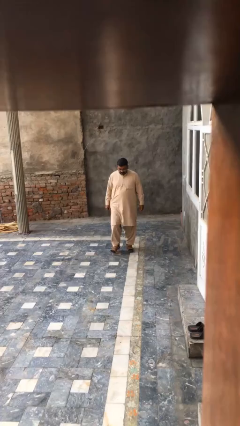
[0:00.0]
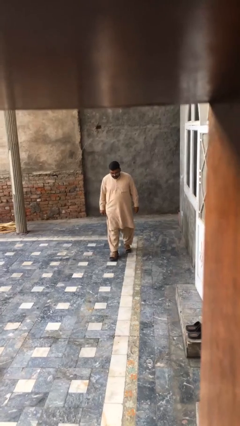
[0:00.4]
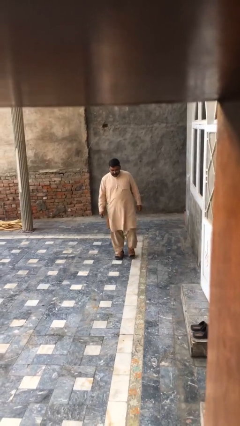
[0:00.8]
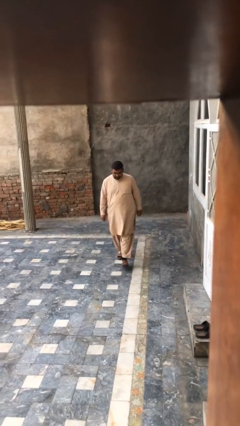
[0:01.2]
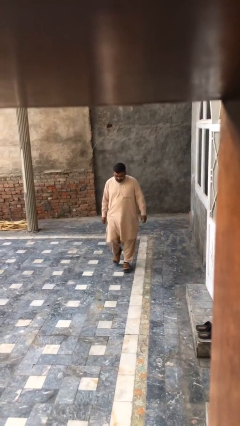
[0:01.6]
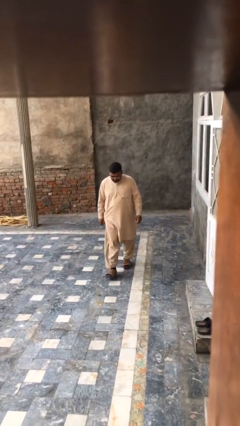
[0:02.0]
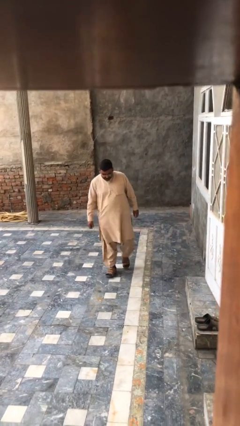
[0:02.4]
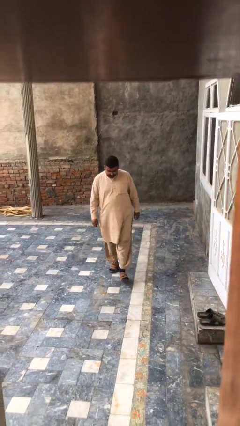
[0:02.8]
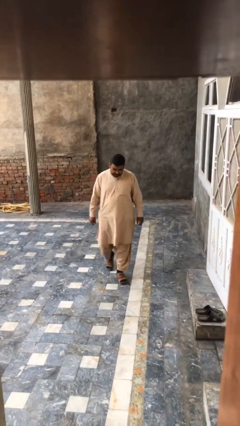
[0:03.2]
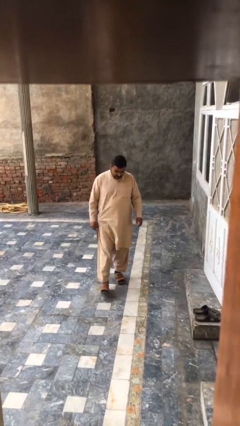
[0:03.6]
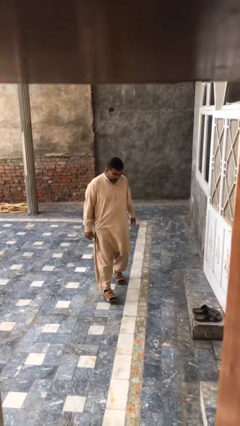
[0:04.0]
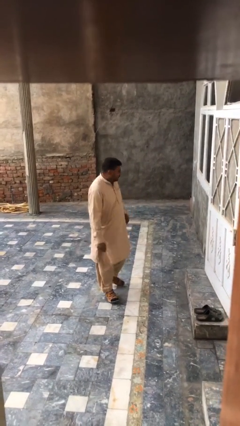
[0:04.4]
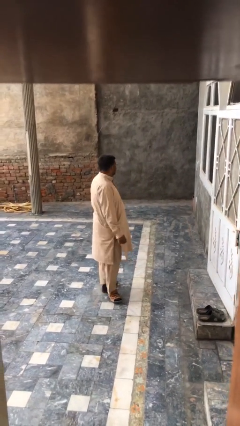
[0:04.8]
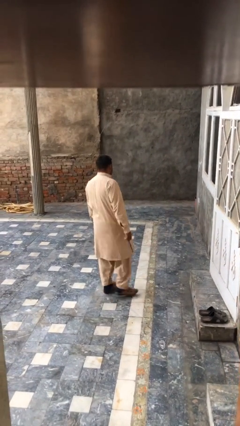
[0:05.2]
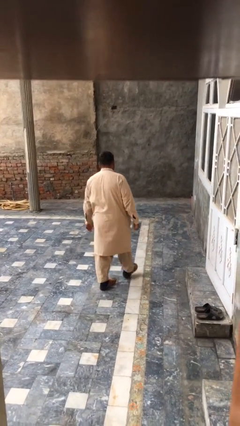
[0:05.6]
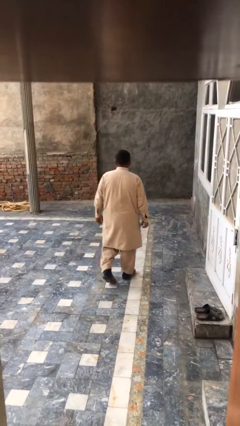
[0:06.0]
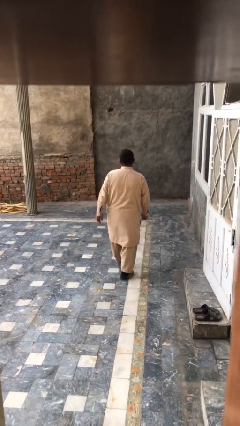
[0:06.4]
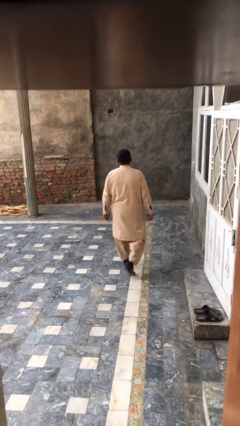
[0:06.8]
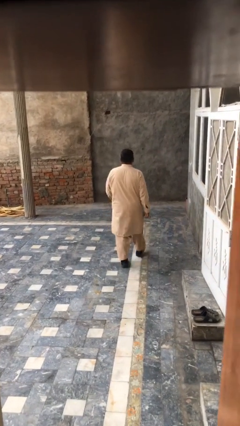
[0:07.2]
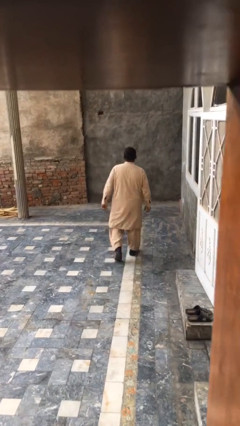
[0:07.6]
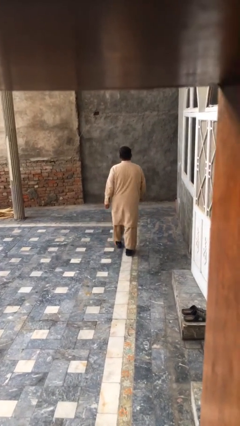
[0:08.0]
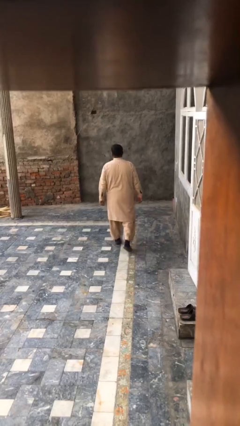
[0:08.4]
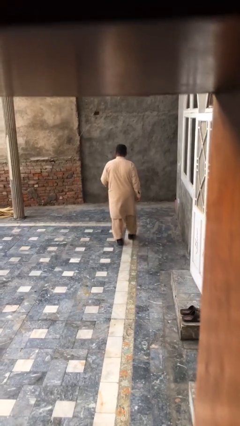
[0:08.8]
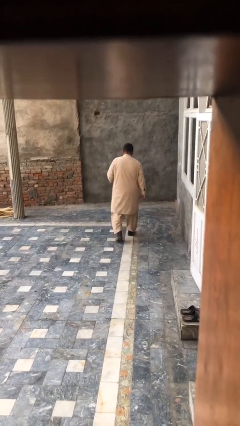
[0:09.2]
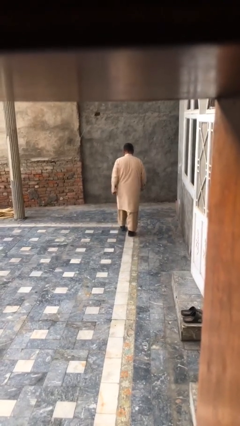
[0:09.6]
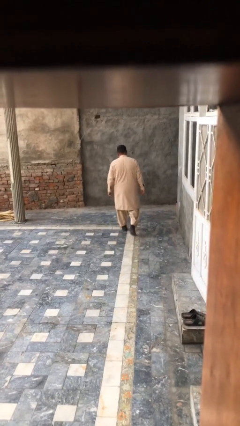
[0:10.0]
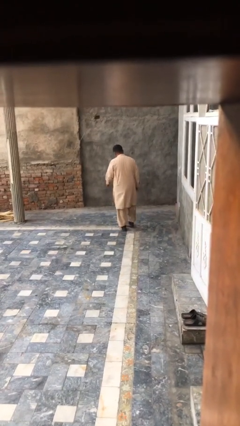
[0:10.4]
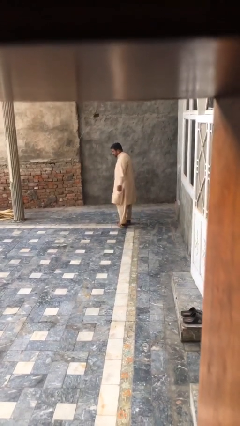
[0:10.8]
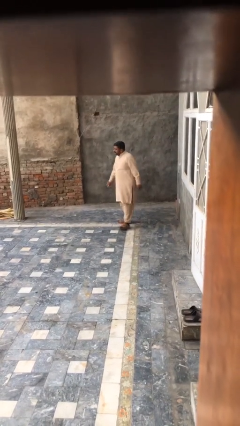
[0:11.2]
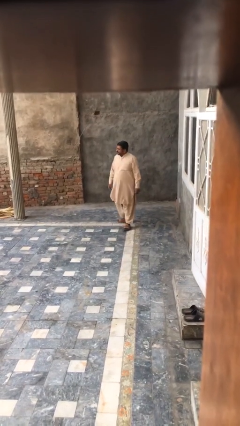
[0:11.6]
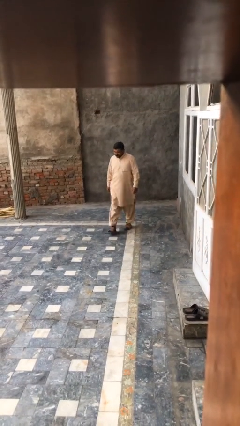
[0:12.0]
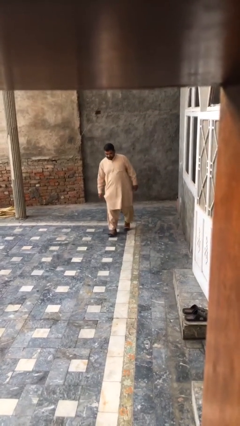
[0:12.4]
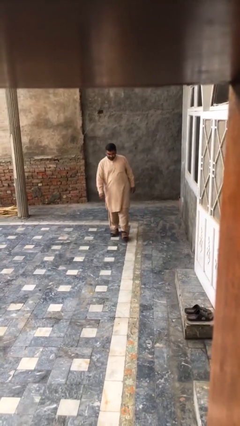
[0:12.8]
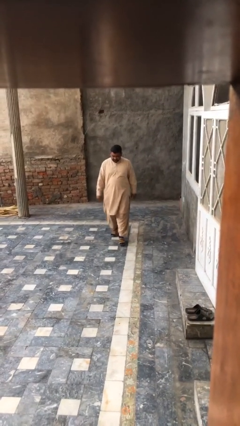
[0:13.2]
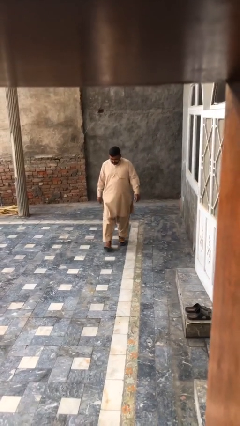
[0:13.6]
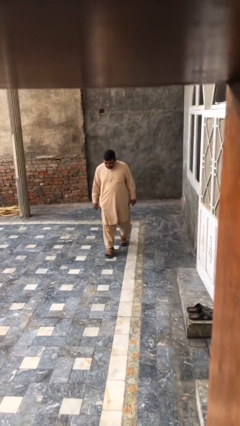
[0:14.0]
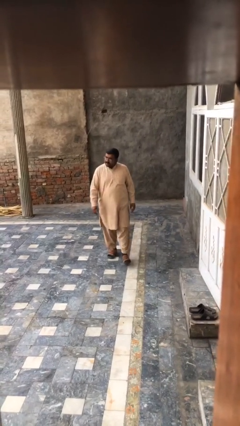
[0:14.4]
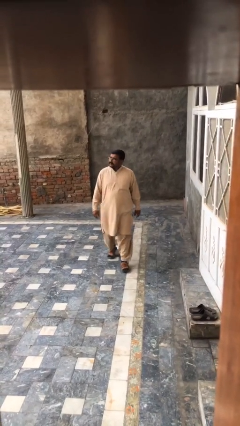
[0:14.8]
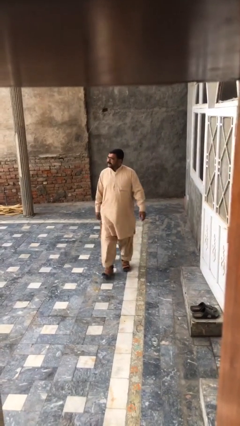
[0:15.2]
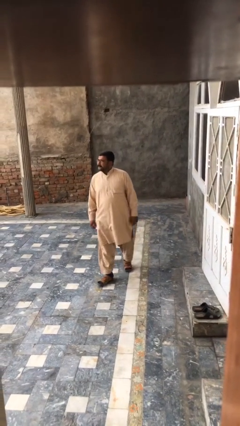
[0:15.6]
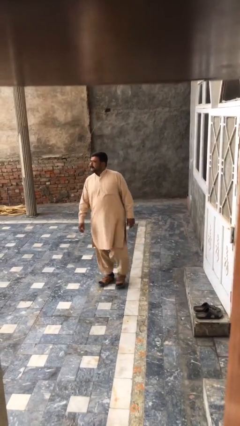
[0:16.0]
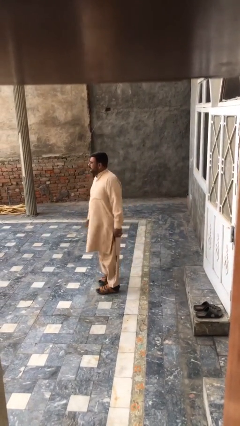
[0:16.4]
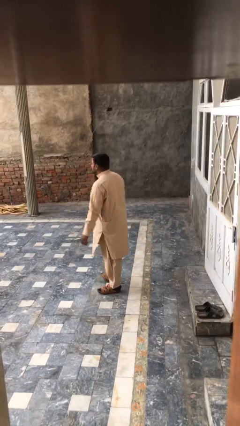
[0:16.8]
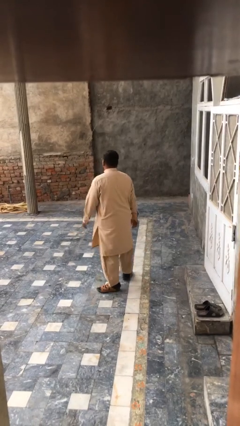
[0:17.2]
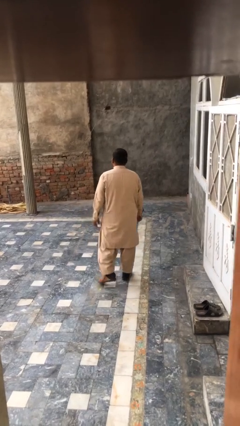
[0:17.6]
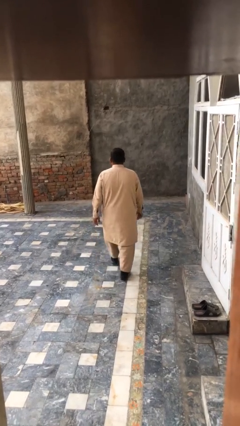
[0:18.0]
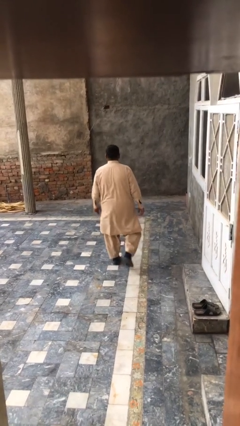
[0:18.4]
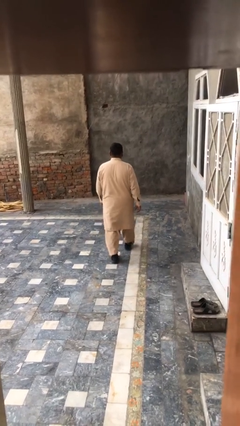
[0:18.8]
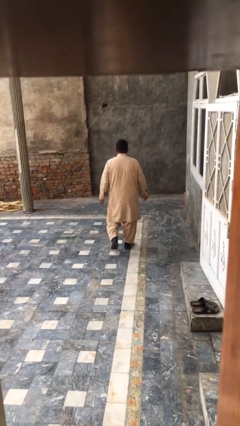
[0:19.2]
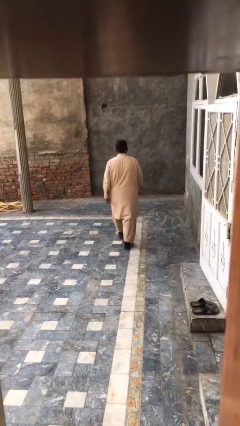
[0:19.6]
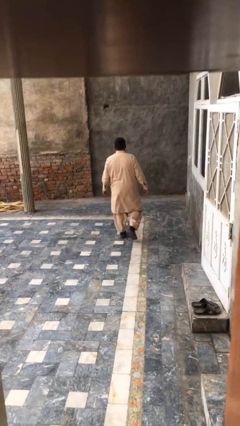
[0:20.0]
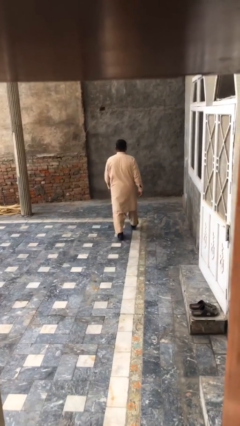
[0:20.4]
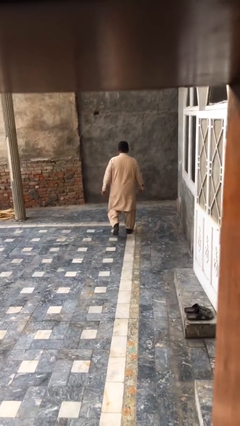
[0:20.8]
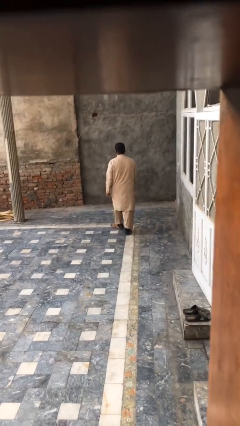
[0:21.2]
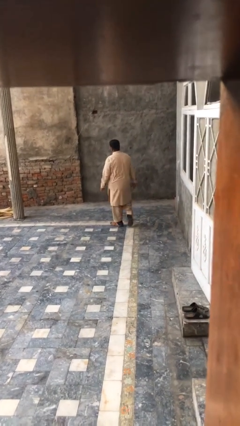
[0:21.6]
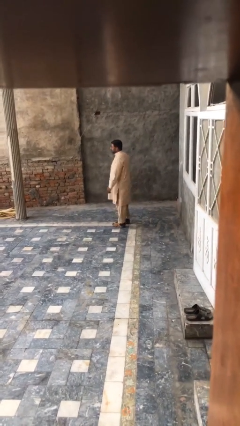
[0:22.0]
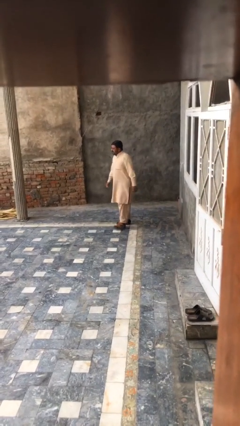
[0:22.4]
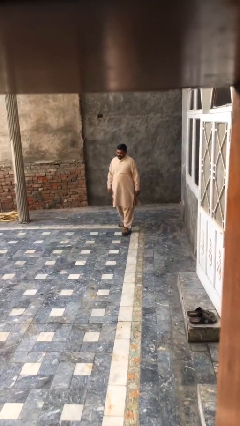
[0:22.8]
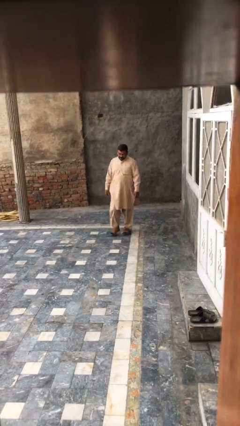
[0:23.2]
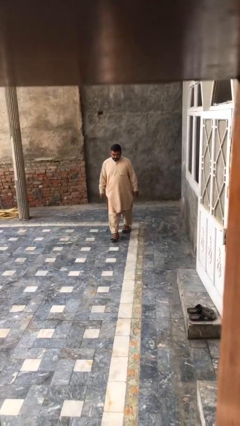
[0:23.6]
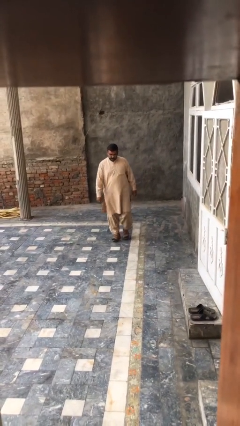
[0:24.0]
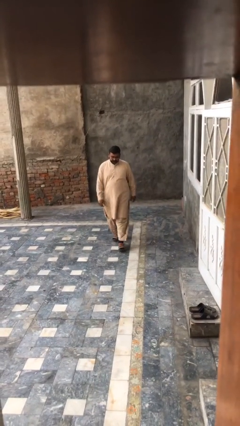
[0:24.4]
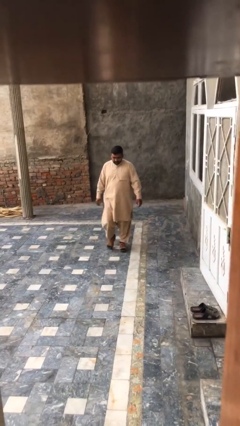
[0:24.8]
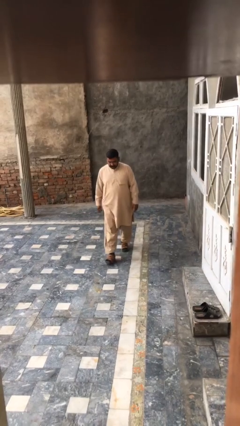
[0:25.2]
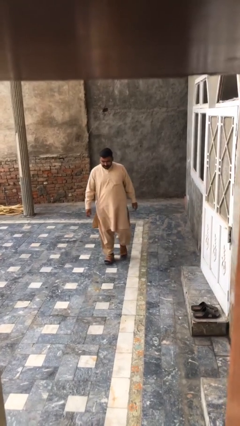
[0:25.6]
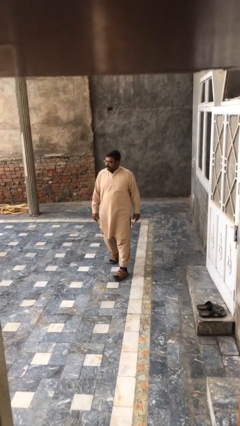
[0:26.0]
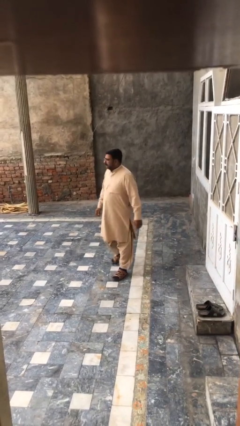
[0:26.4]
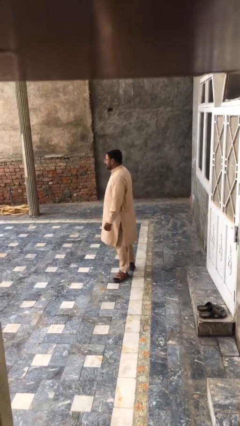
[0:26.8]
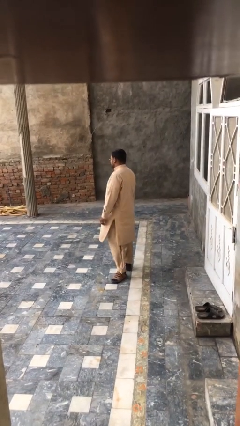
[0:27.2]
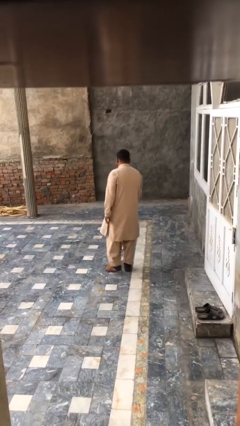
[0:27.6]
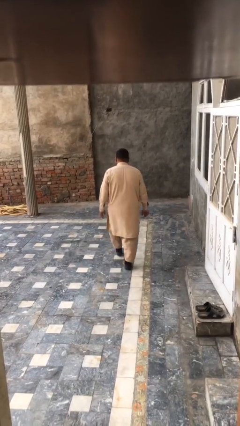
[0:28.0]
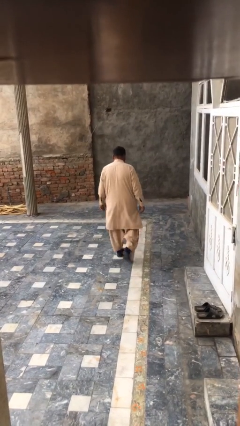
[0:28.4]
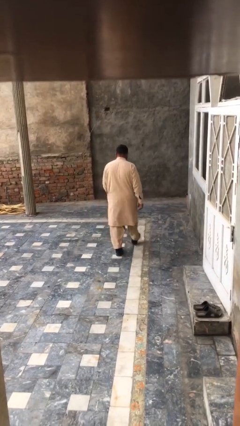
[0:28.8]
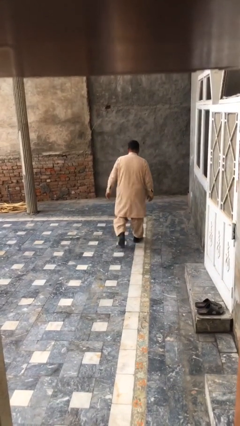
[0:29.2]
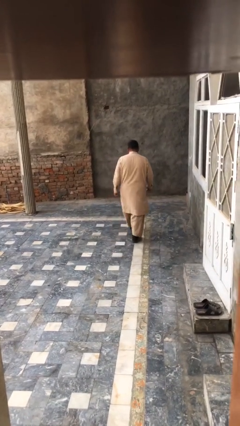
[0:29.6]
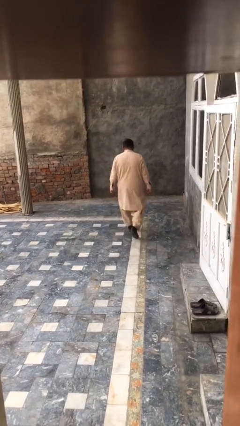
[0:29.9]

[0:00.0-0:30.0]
person walks

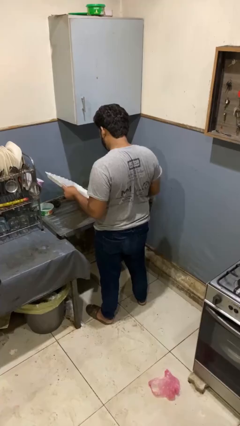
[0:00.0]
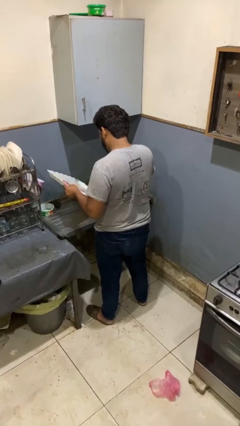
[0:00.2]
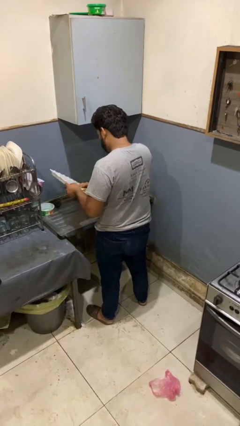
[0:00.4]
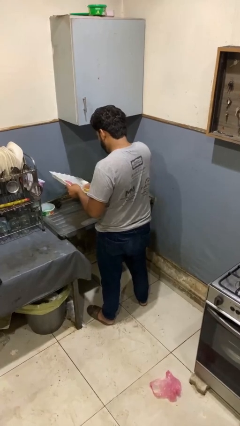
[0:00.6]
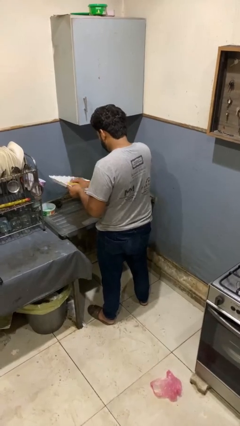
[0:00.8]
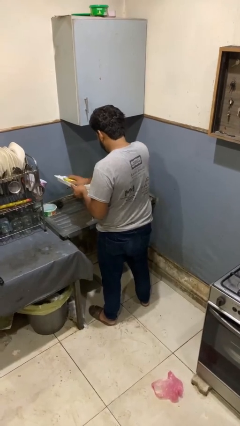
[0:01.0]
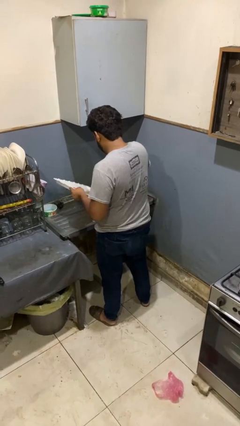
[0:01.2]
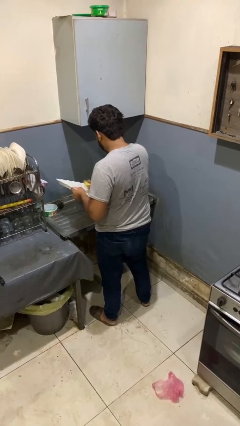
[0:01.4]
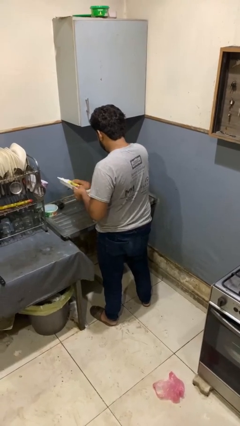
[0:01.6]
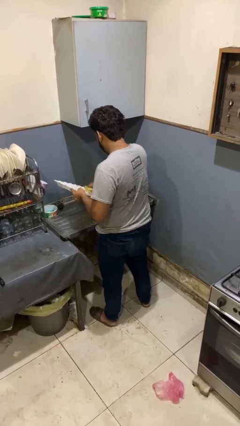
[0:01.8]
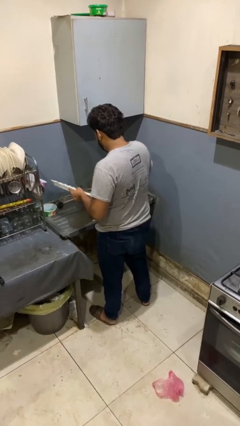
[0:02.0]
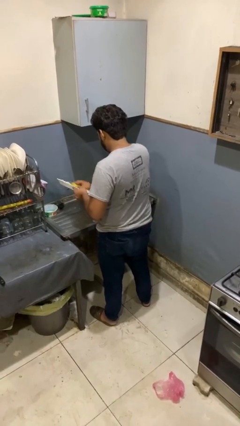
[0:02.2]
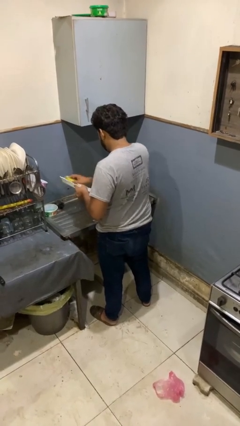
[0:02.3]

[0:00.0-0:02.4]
person washes dish

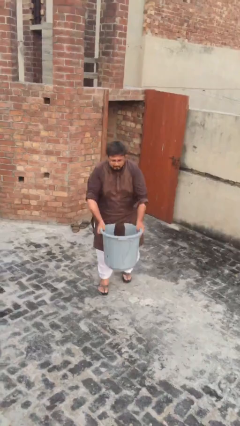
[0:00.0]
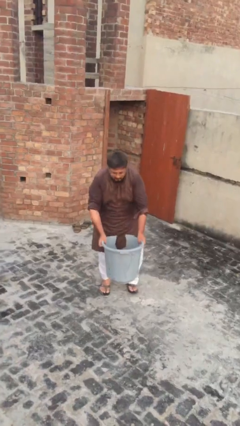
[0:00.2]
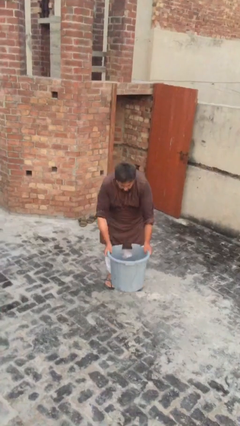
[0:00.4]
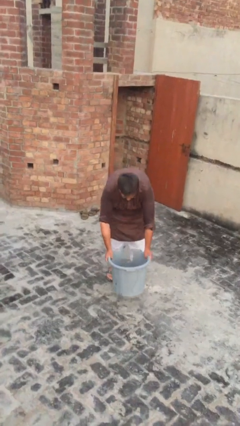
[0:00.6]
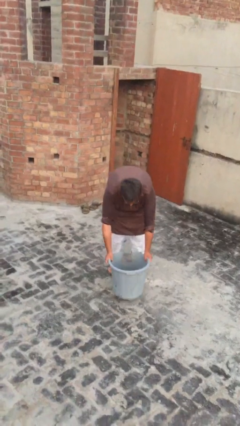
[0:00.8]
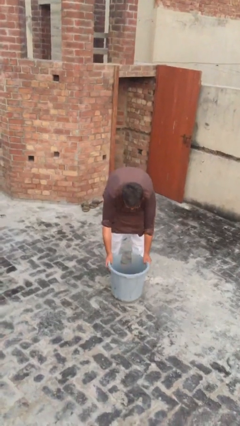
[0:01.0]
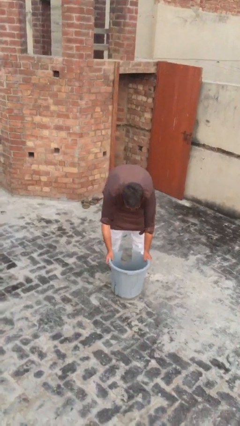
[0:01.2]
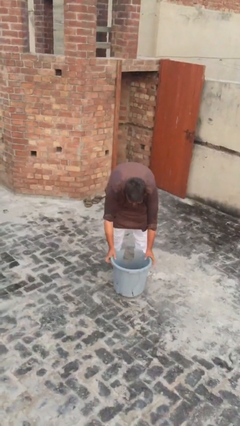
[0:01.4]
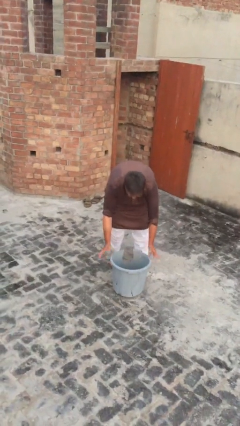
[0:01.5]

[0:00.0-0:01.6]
person puts down object on floor
